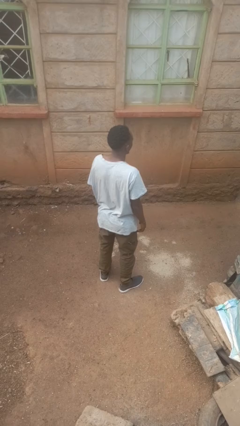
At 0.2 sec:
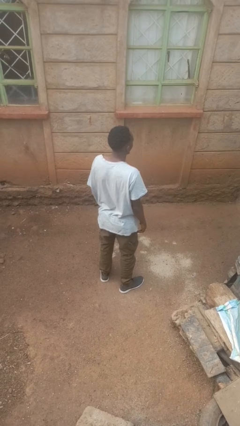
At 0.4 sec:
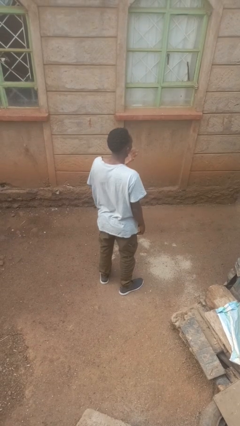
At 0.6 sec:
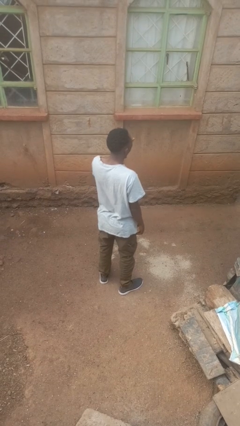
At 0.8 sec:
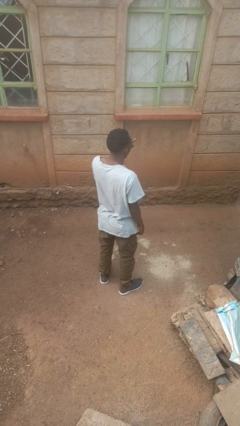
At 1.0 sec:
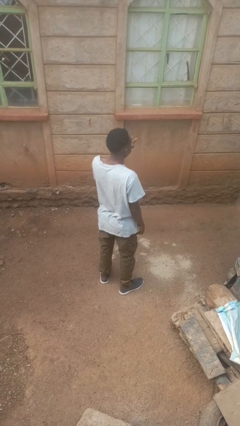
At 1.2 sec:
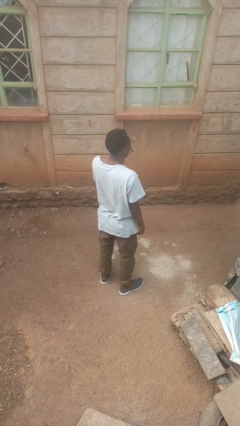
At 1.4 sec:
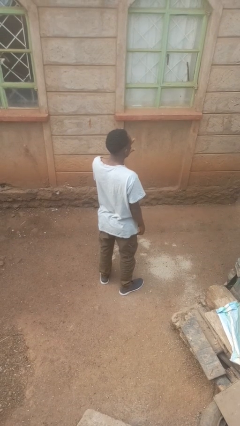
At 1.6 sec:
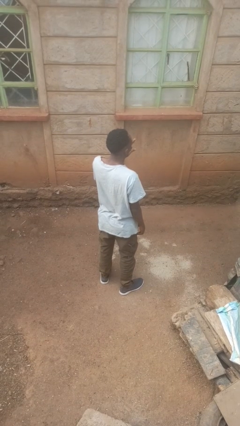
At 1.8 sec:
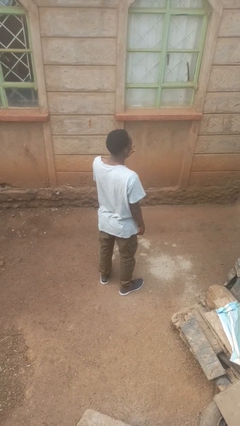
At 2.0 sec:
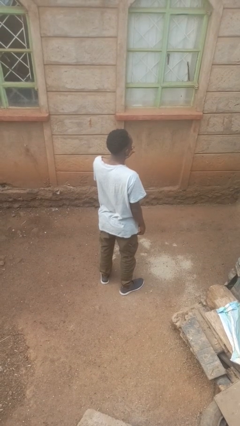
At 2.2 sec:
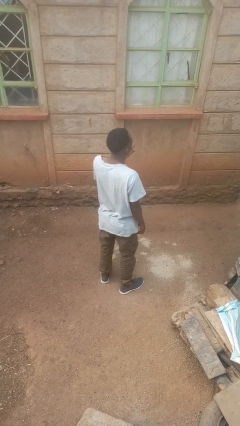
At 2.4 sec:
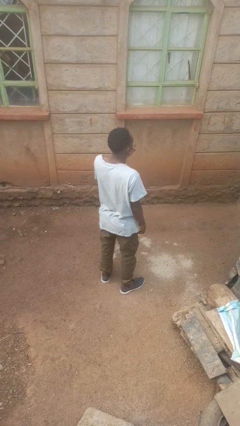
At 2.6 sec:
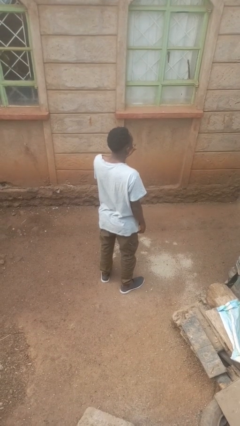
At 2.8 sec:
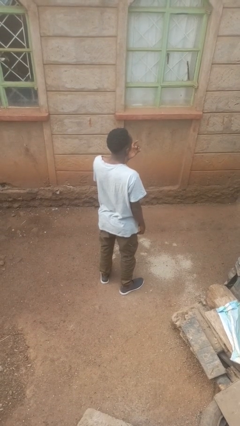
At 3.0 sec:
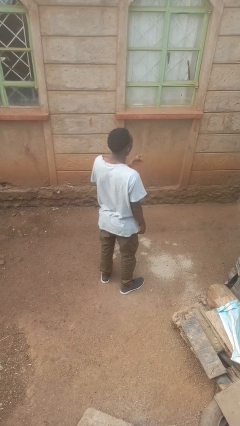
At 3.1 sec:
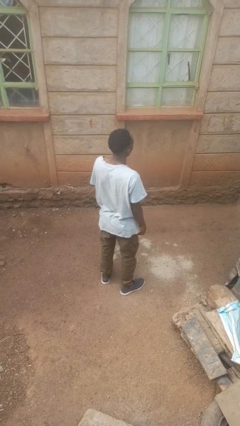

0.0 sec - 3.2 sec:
person licks fingers

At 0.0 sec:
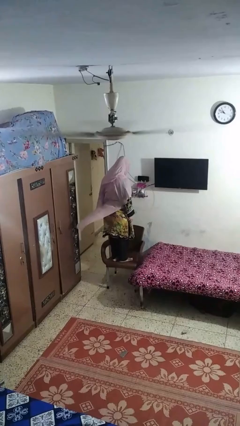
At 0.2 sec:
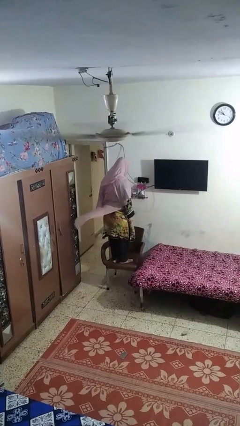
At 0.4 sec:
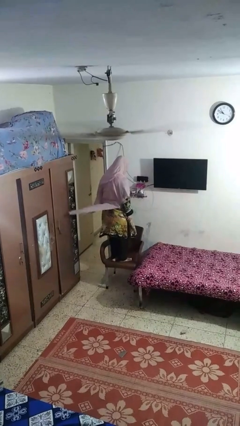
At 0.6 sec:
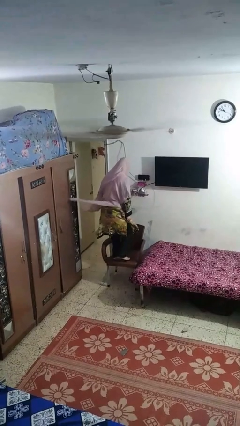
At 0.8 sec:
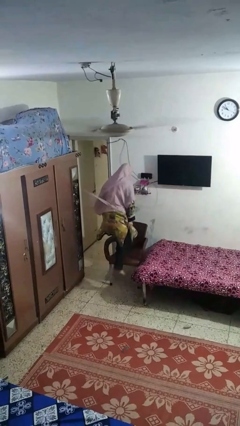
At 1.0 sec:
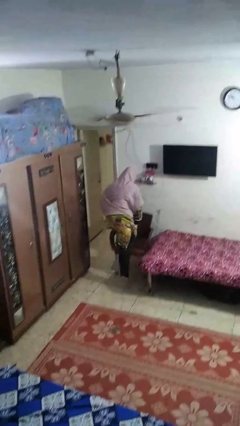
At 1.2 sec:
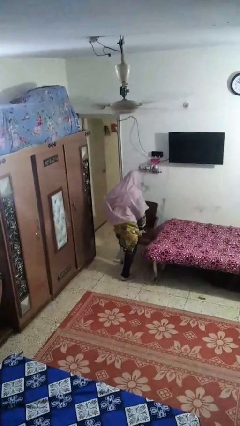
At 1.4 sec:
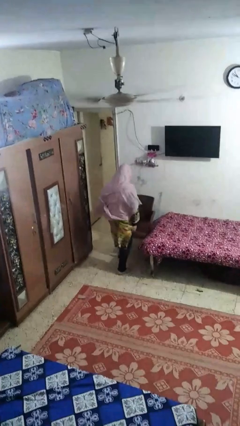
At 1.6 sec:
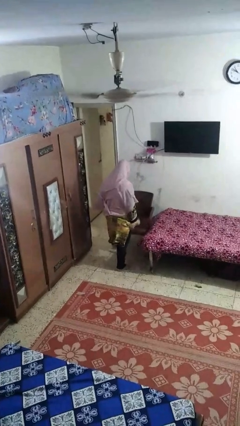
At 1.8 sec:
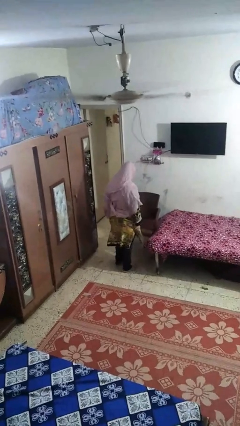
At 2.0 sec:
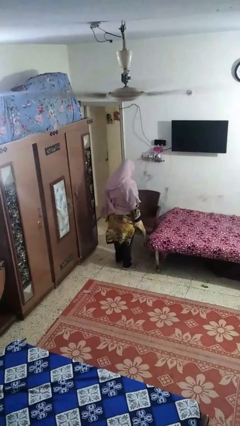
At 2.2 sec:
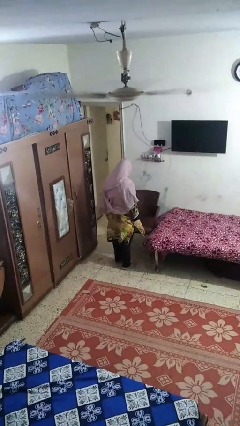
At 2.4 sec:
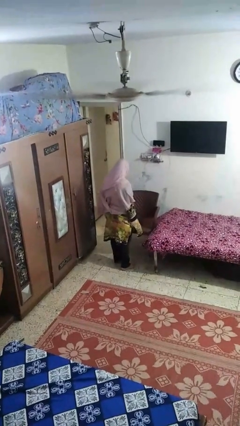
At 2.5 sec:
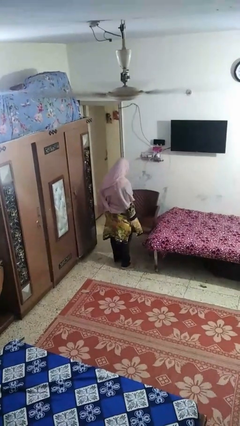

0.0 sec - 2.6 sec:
person climbs off chair

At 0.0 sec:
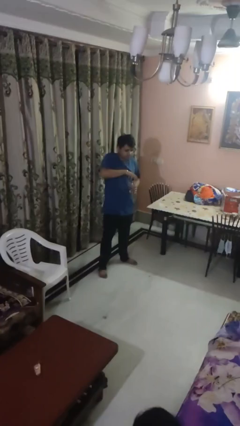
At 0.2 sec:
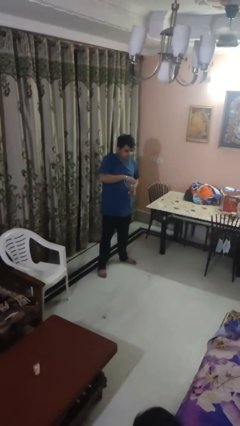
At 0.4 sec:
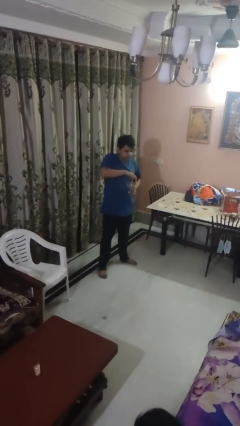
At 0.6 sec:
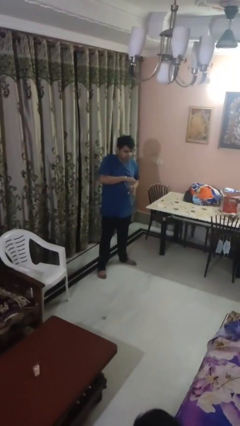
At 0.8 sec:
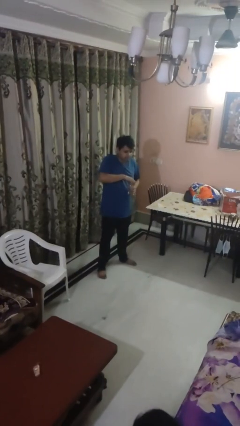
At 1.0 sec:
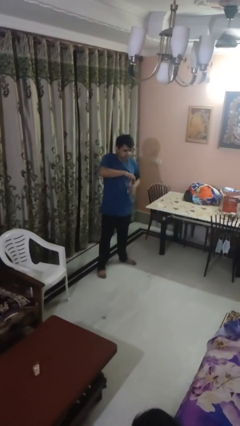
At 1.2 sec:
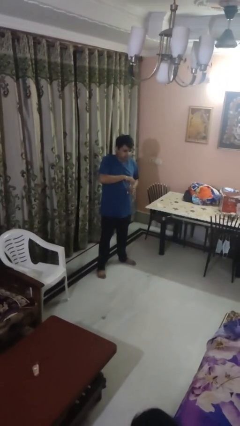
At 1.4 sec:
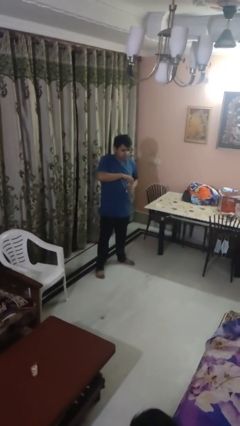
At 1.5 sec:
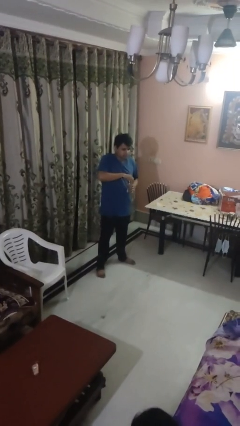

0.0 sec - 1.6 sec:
person unscrews lid from bottle

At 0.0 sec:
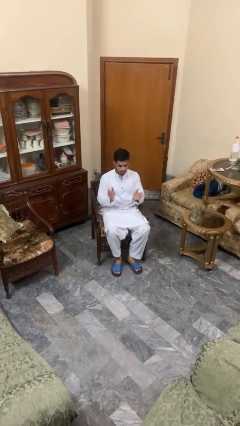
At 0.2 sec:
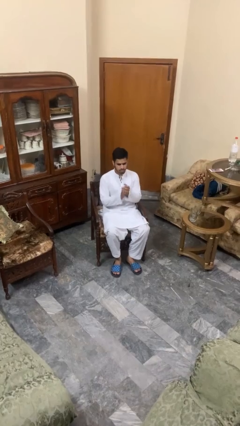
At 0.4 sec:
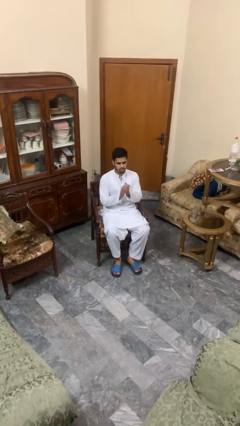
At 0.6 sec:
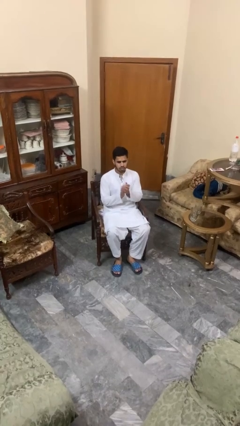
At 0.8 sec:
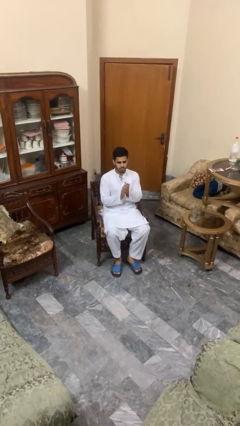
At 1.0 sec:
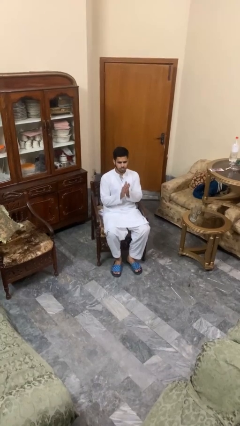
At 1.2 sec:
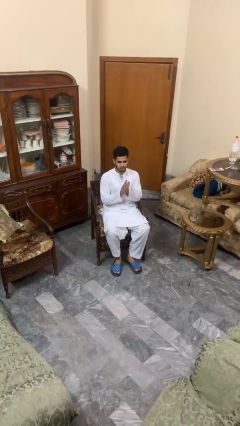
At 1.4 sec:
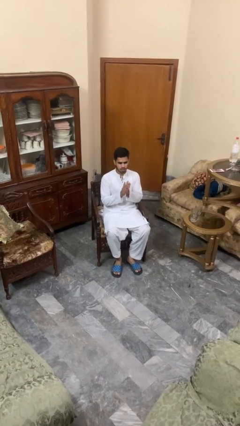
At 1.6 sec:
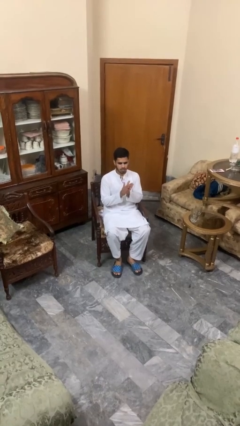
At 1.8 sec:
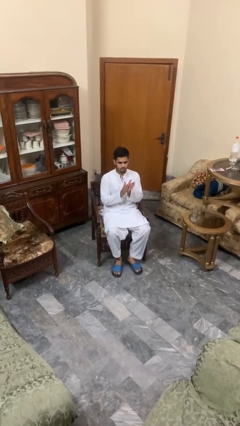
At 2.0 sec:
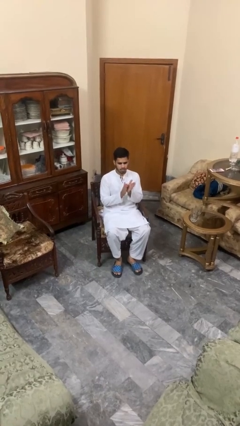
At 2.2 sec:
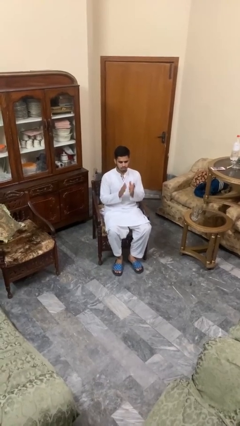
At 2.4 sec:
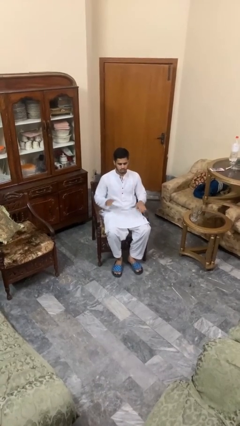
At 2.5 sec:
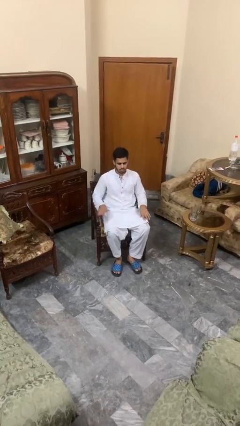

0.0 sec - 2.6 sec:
person claps hands

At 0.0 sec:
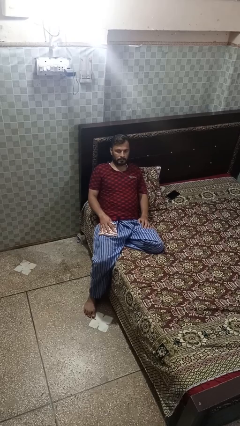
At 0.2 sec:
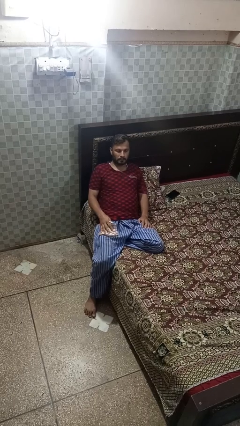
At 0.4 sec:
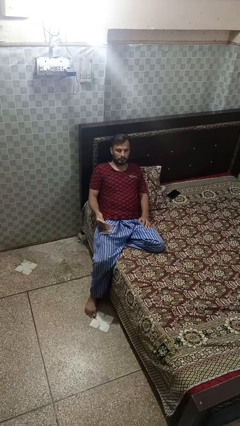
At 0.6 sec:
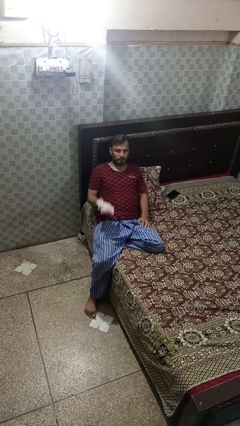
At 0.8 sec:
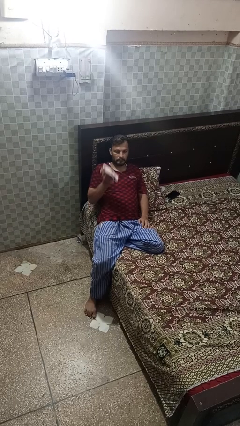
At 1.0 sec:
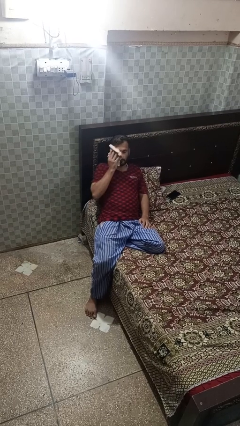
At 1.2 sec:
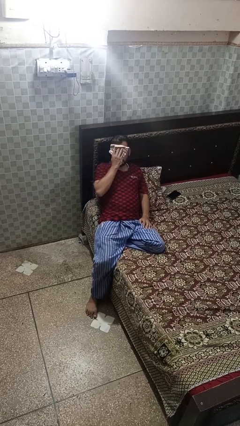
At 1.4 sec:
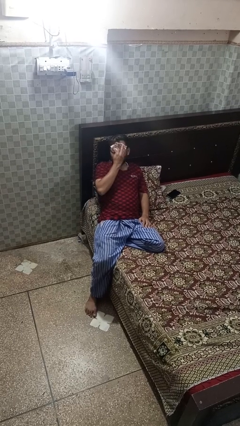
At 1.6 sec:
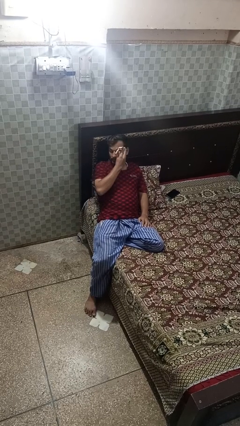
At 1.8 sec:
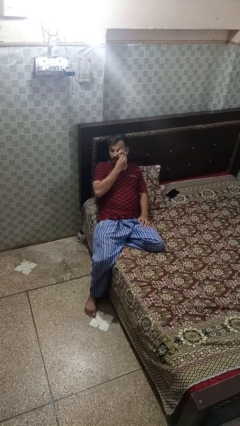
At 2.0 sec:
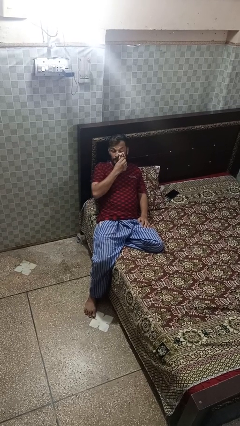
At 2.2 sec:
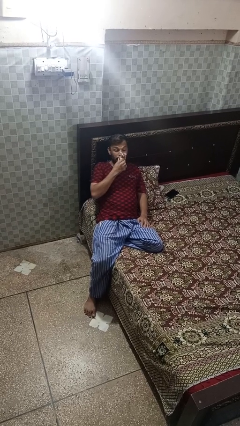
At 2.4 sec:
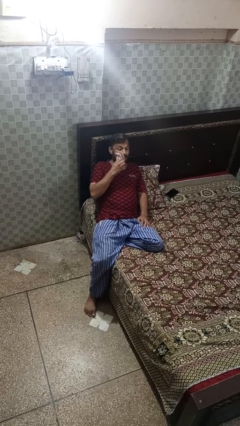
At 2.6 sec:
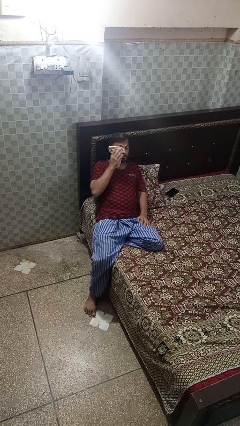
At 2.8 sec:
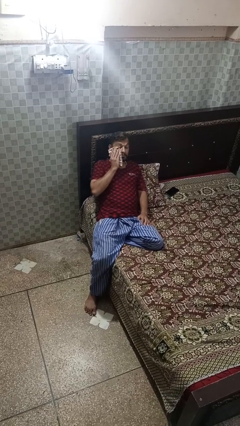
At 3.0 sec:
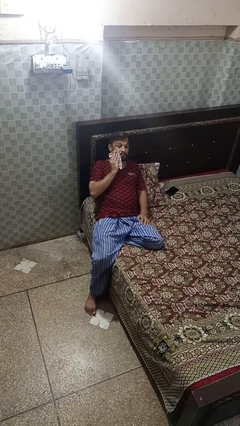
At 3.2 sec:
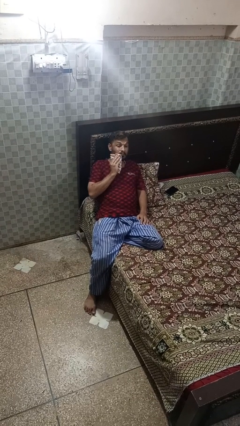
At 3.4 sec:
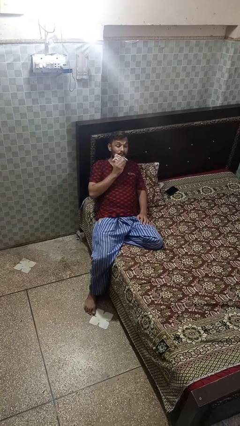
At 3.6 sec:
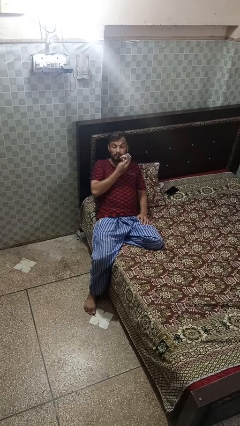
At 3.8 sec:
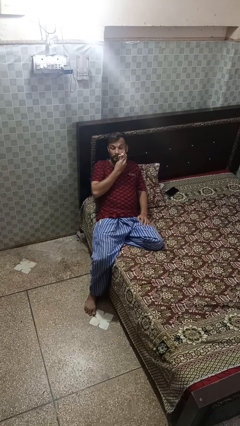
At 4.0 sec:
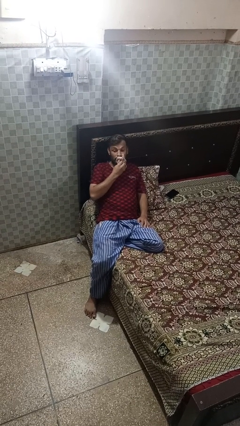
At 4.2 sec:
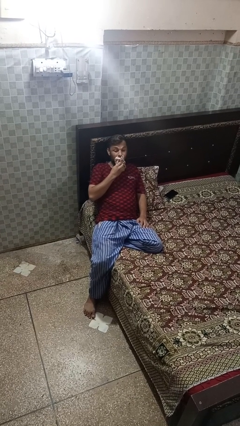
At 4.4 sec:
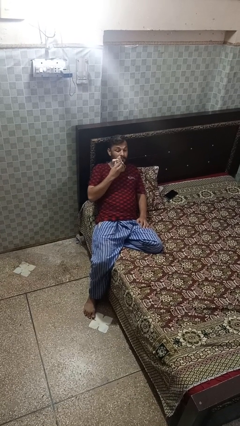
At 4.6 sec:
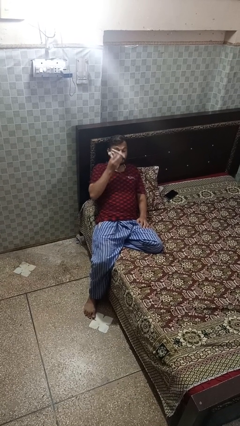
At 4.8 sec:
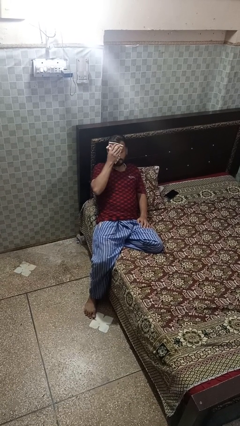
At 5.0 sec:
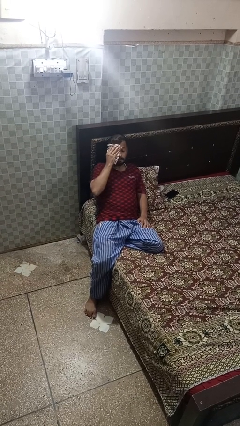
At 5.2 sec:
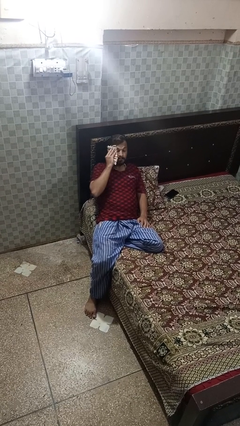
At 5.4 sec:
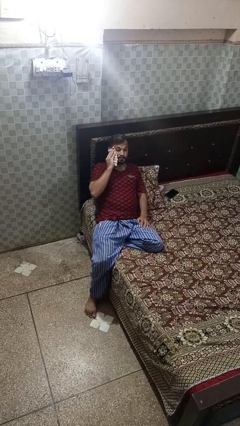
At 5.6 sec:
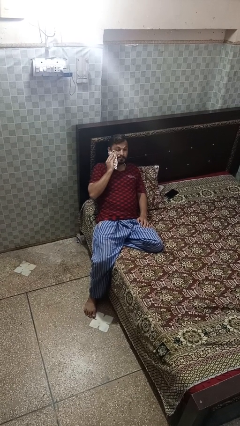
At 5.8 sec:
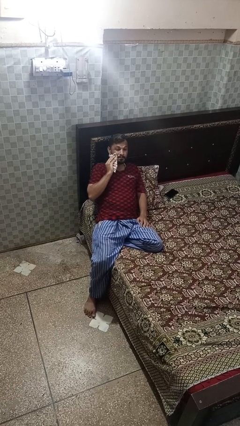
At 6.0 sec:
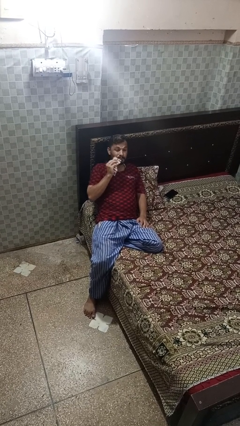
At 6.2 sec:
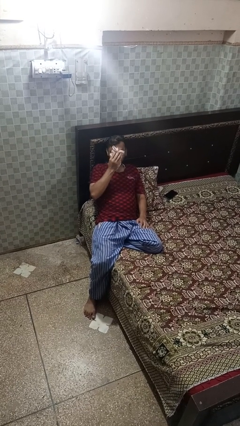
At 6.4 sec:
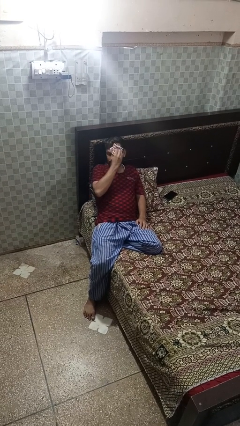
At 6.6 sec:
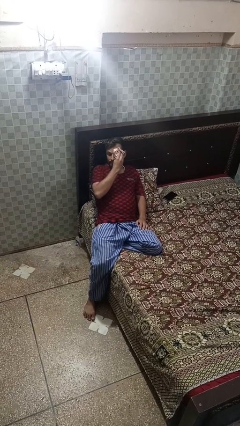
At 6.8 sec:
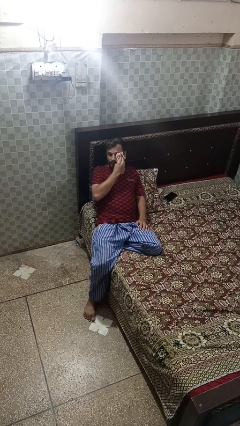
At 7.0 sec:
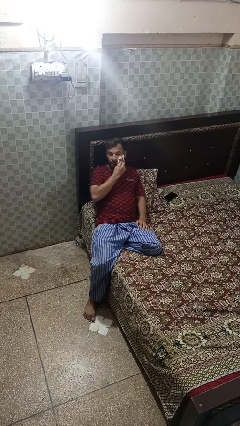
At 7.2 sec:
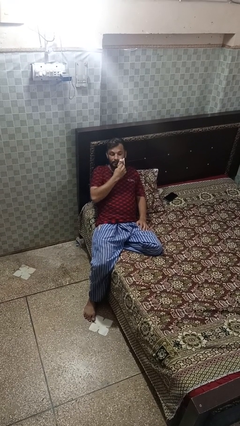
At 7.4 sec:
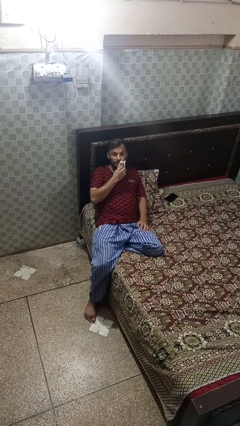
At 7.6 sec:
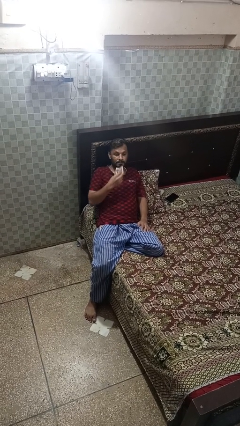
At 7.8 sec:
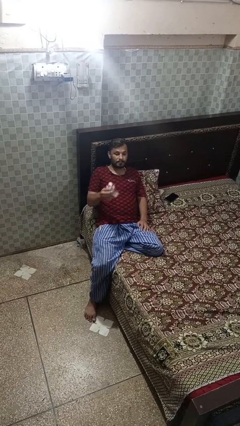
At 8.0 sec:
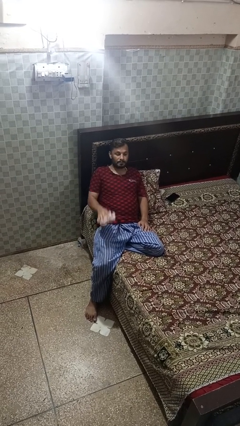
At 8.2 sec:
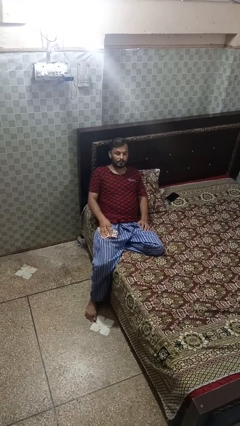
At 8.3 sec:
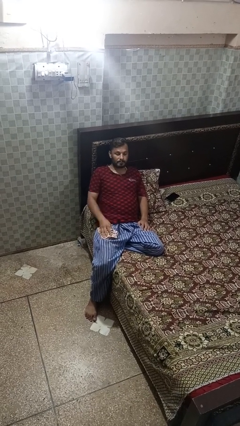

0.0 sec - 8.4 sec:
person wipes mouth with napkin
